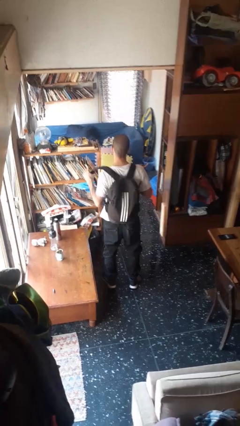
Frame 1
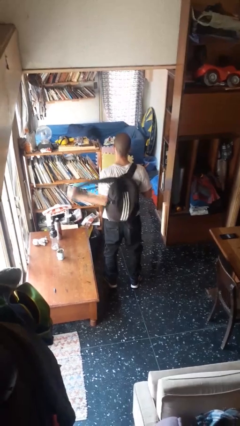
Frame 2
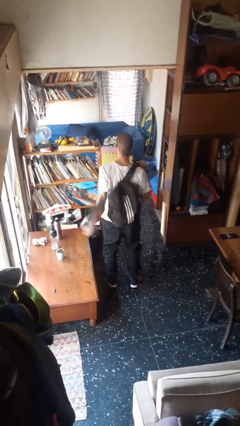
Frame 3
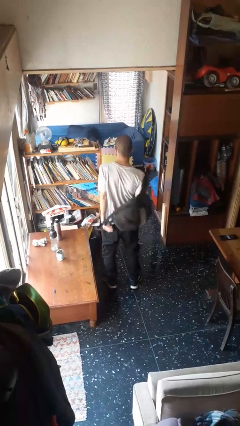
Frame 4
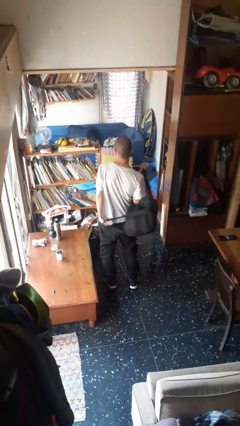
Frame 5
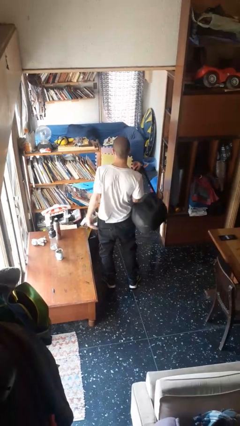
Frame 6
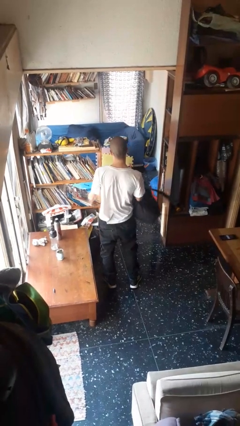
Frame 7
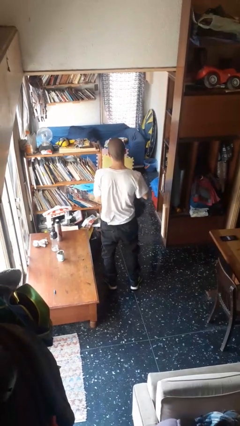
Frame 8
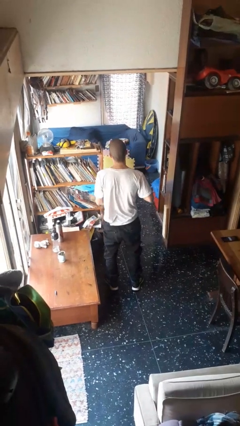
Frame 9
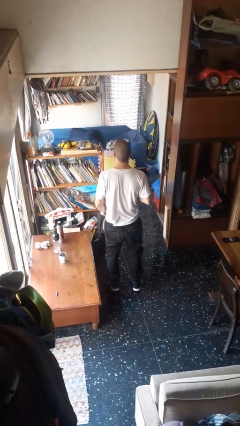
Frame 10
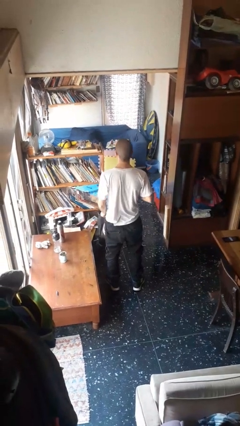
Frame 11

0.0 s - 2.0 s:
person takes off backpack

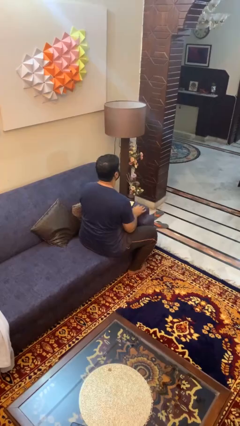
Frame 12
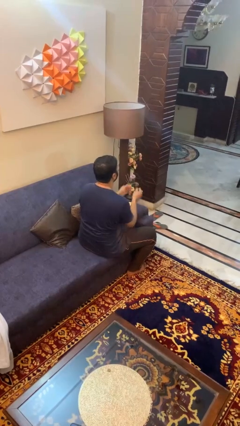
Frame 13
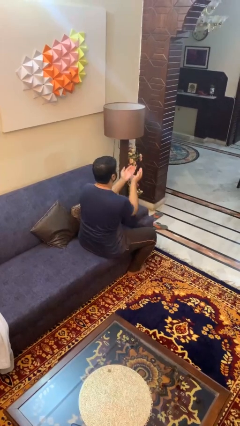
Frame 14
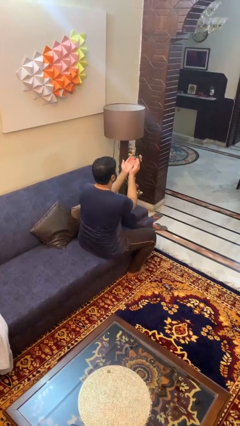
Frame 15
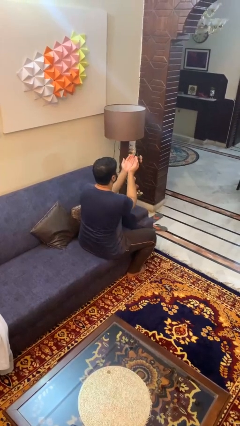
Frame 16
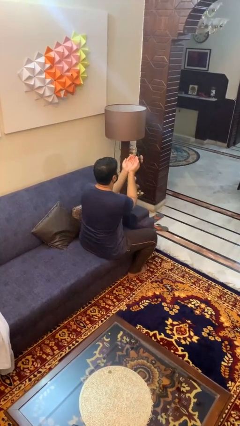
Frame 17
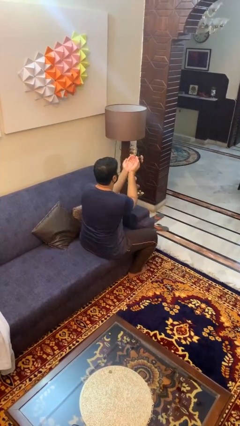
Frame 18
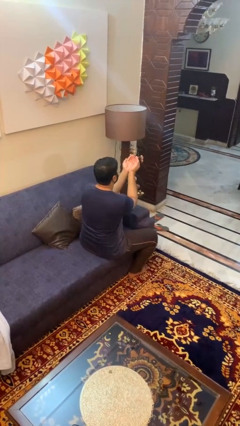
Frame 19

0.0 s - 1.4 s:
person prays

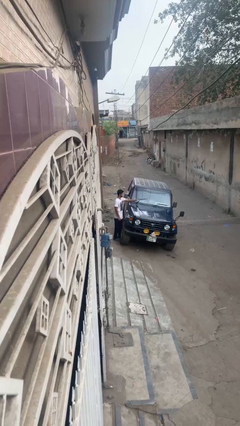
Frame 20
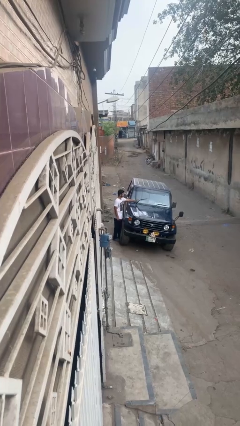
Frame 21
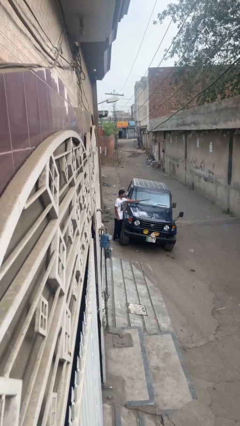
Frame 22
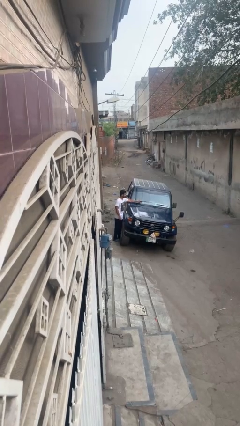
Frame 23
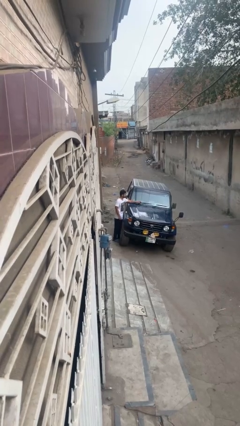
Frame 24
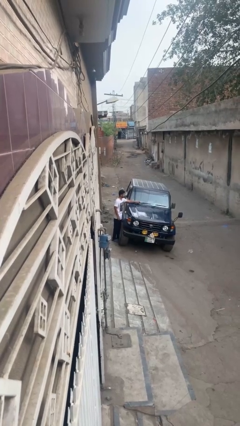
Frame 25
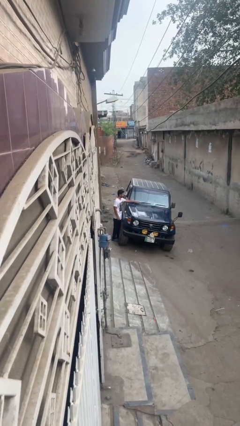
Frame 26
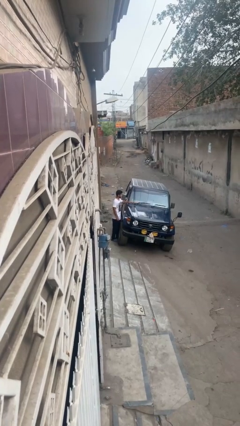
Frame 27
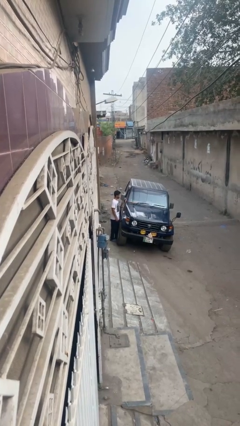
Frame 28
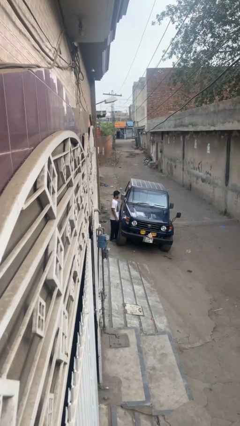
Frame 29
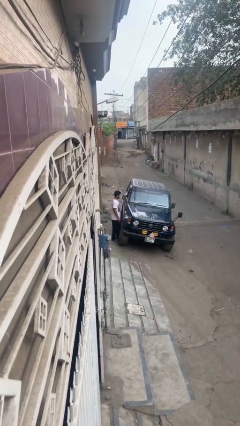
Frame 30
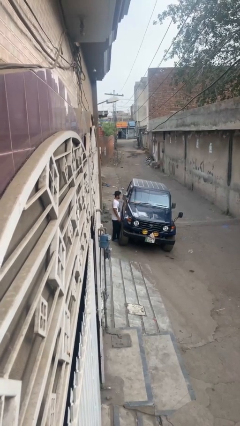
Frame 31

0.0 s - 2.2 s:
person flips down car wipers

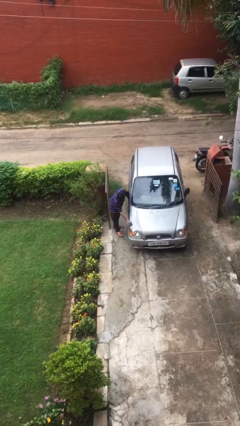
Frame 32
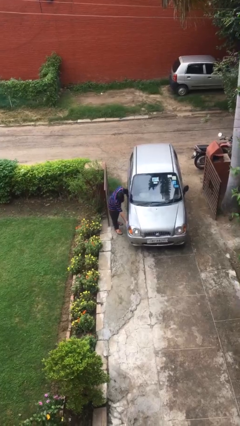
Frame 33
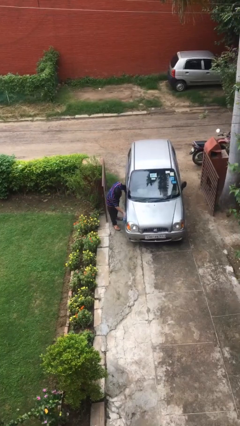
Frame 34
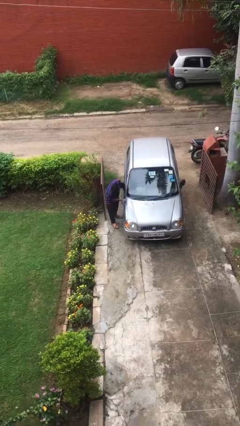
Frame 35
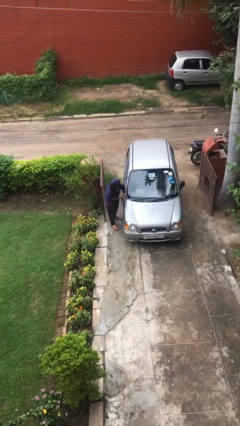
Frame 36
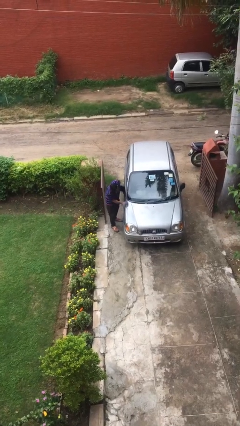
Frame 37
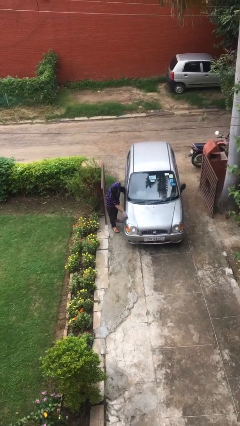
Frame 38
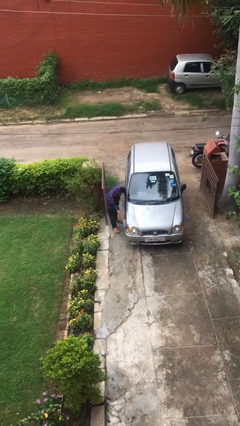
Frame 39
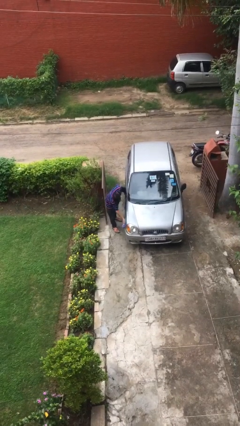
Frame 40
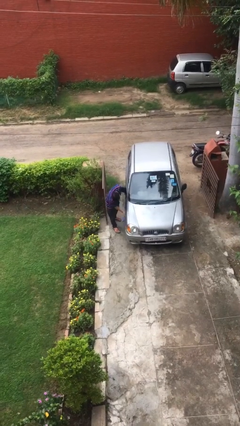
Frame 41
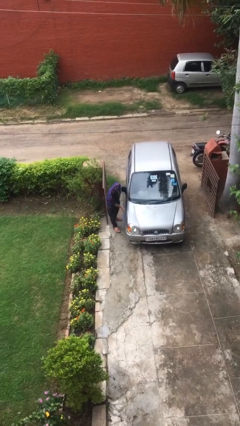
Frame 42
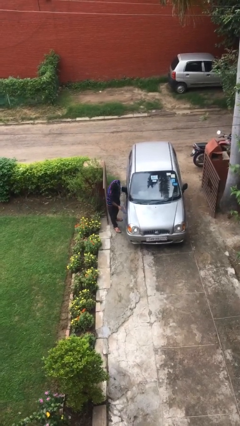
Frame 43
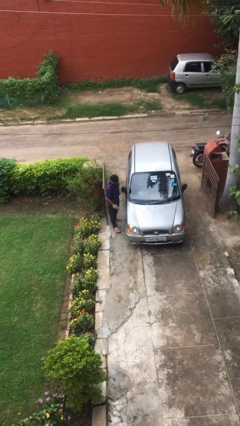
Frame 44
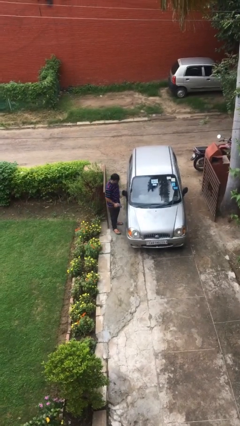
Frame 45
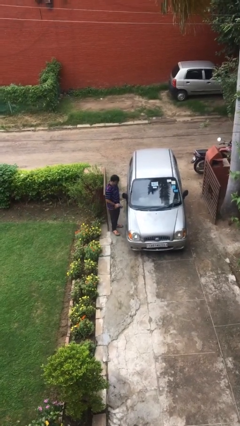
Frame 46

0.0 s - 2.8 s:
person polishes car with rag

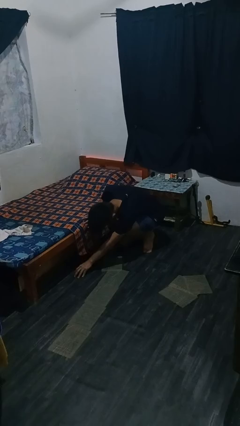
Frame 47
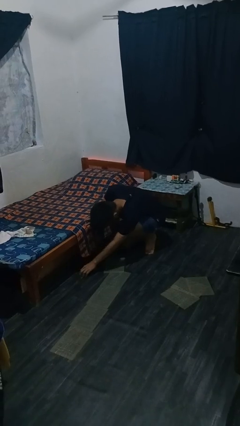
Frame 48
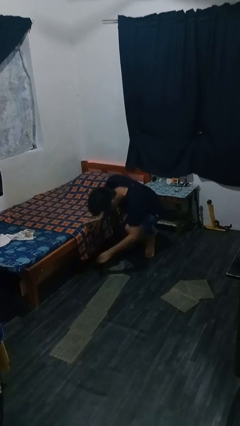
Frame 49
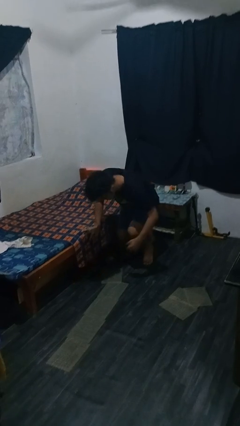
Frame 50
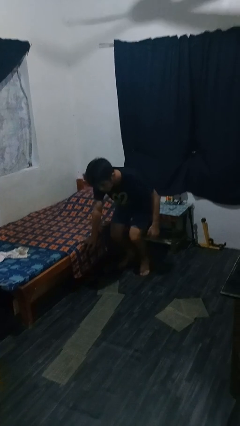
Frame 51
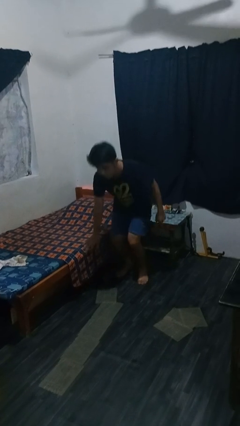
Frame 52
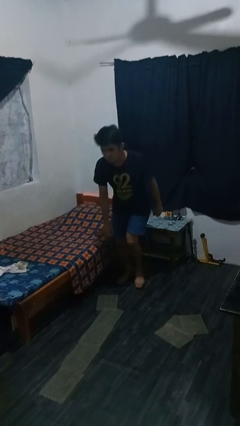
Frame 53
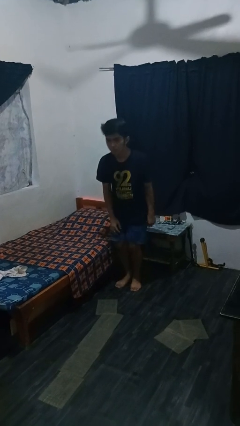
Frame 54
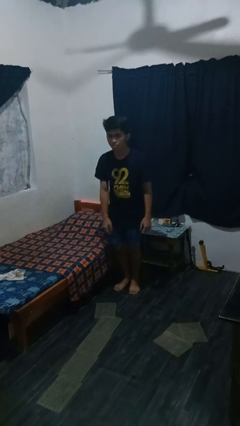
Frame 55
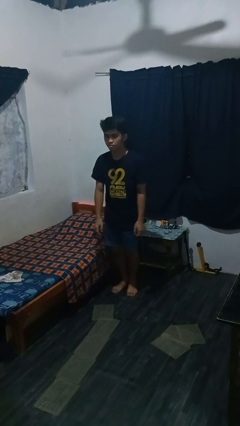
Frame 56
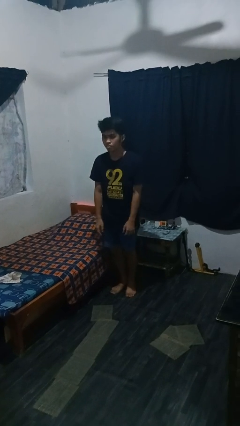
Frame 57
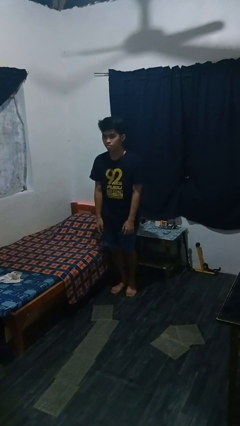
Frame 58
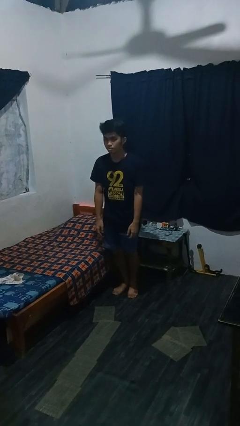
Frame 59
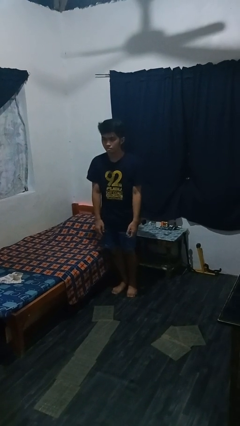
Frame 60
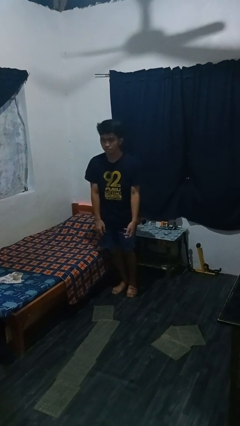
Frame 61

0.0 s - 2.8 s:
person stands up from floor

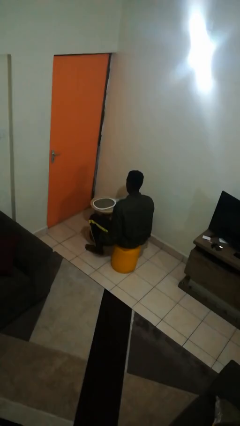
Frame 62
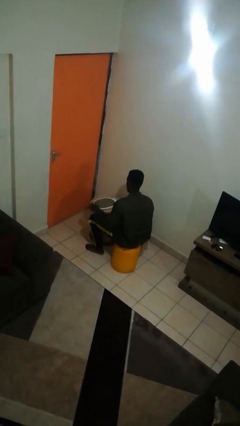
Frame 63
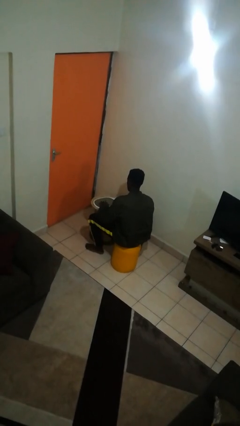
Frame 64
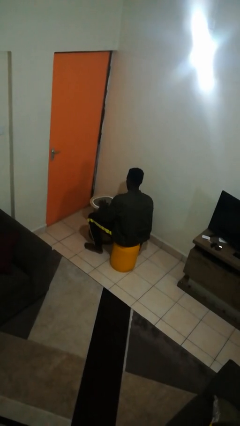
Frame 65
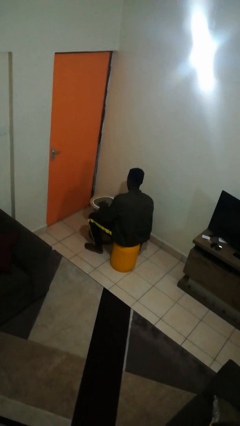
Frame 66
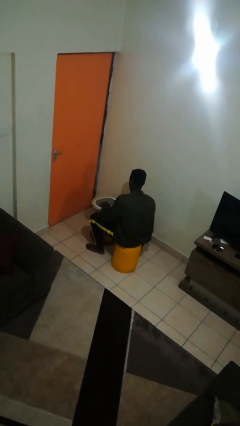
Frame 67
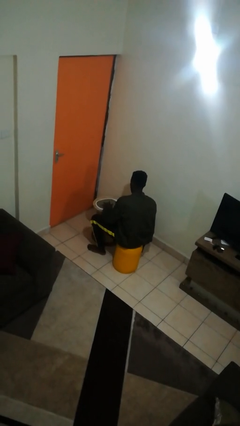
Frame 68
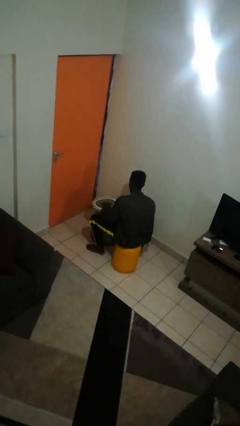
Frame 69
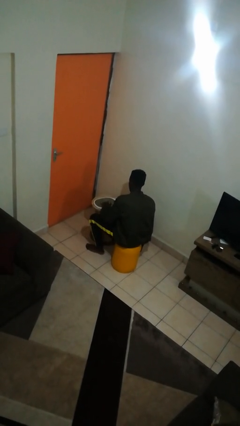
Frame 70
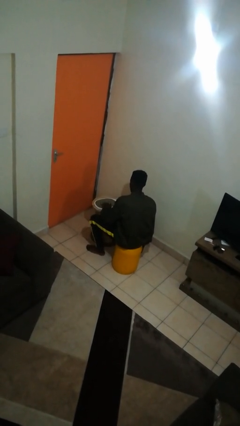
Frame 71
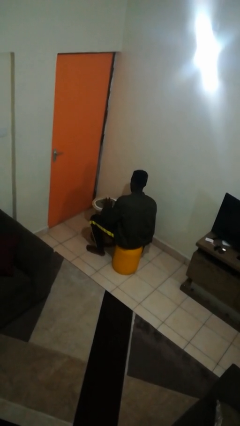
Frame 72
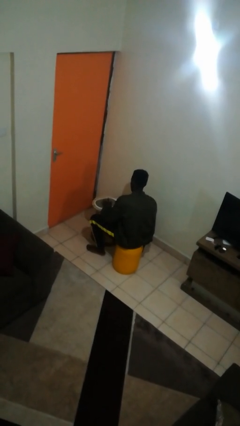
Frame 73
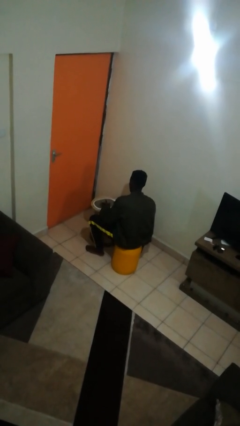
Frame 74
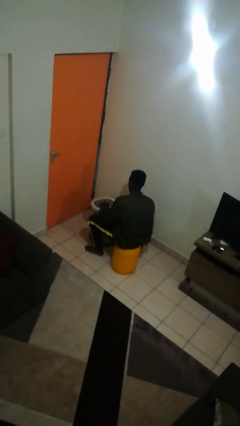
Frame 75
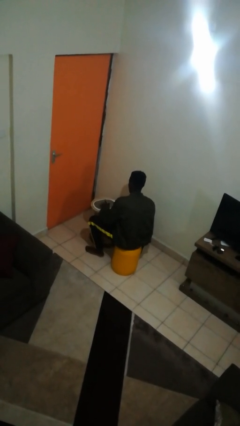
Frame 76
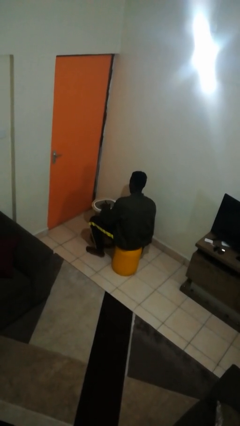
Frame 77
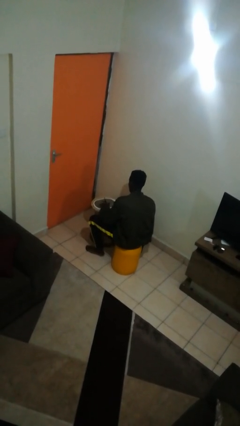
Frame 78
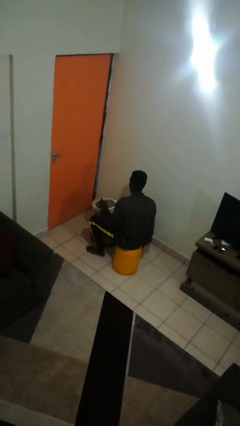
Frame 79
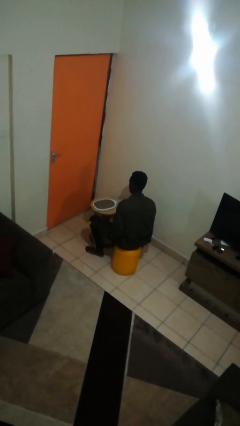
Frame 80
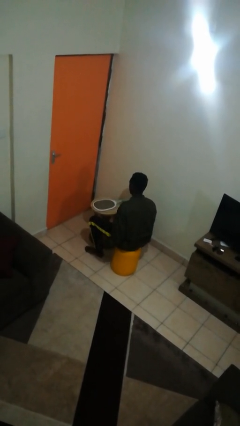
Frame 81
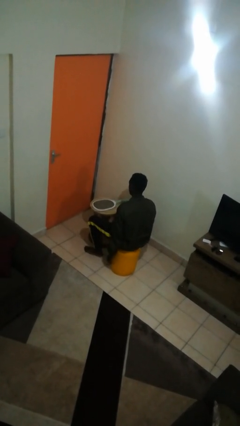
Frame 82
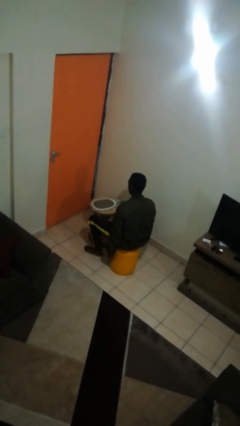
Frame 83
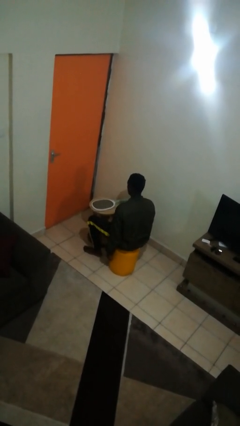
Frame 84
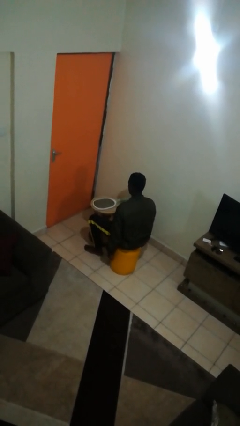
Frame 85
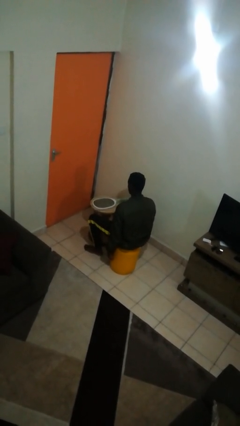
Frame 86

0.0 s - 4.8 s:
person taps object with finger

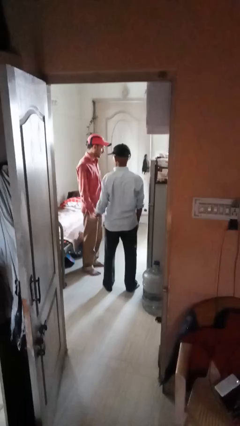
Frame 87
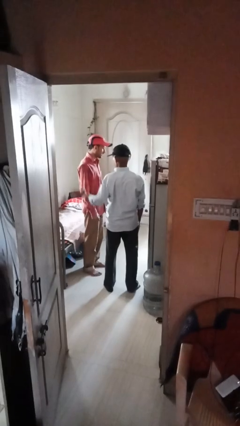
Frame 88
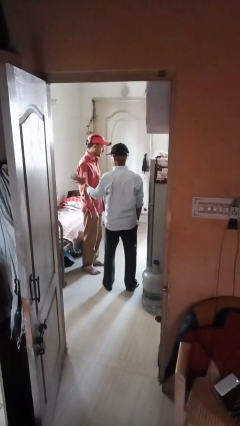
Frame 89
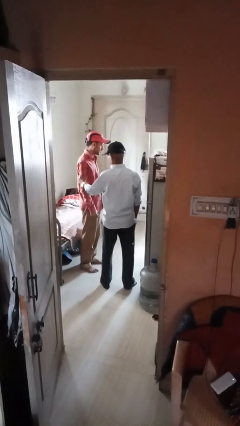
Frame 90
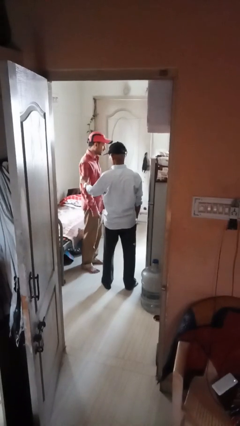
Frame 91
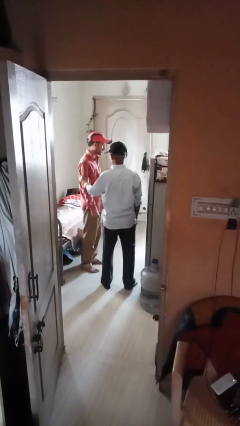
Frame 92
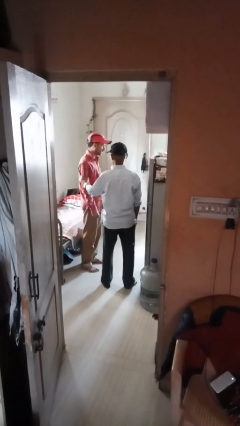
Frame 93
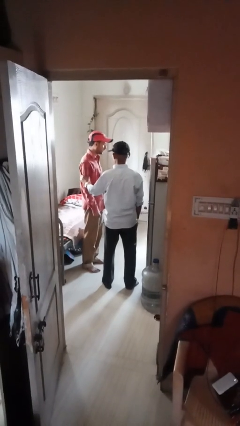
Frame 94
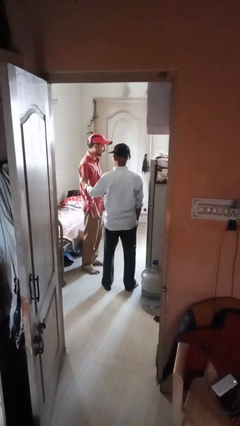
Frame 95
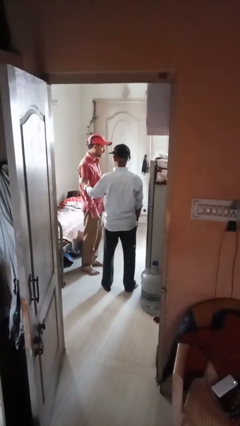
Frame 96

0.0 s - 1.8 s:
person grabs person by shoulder
